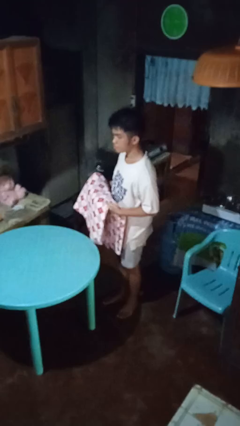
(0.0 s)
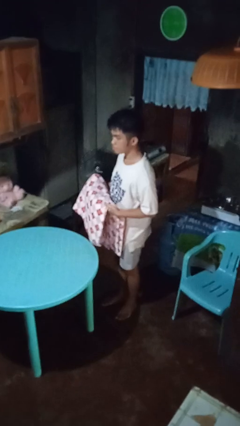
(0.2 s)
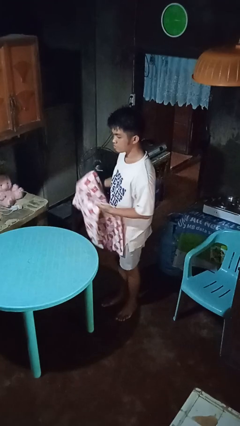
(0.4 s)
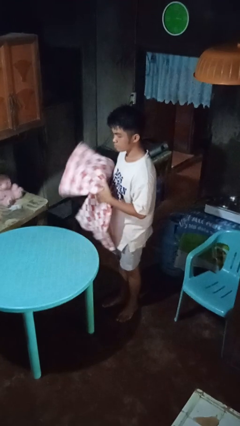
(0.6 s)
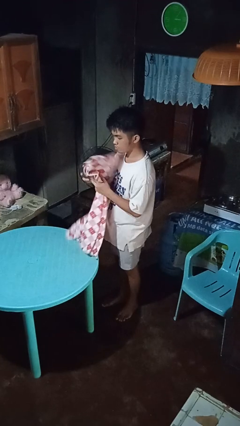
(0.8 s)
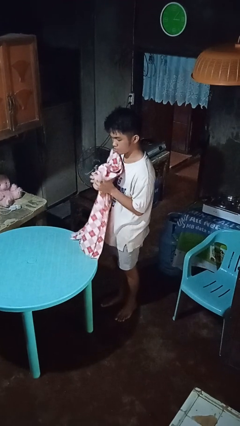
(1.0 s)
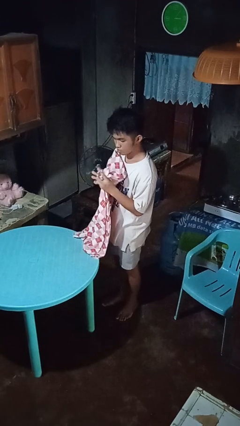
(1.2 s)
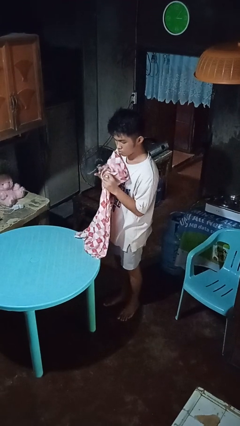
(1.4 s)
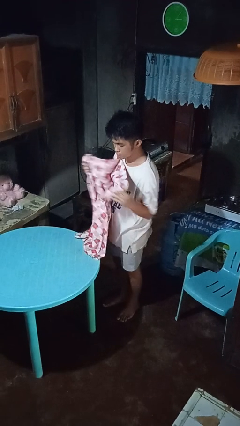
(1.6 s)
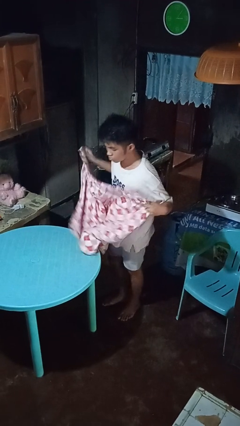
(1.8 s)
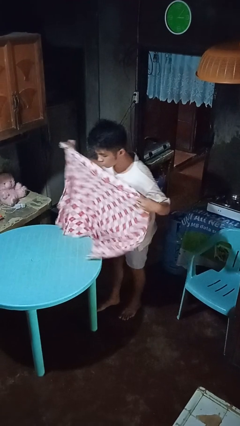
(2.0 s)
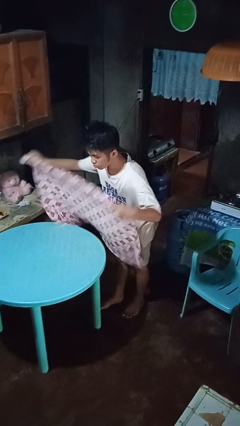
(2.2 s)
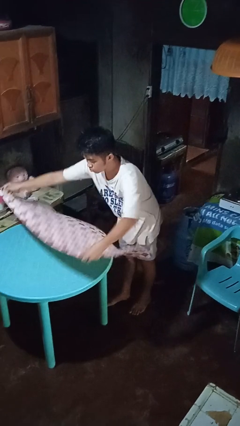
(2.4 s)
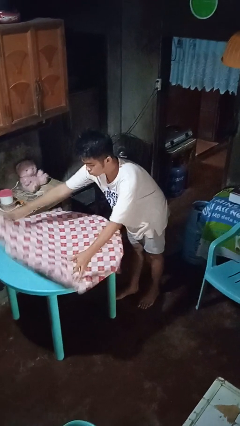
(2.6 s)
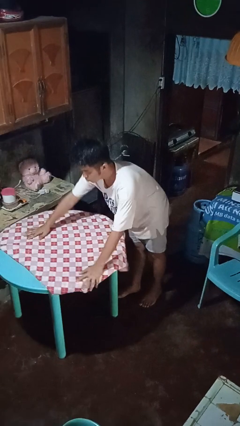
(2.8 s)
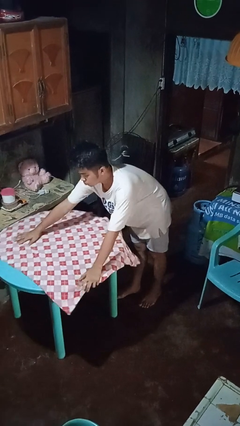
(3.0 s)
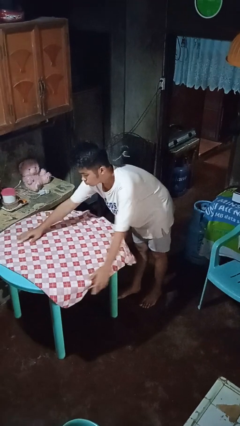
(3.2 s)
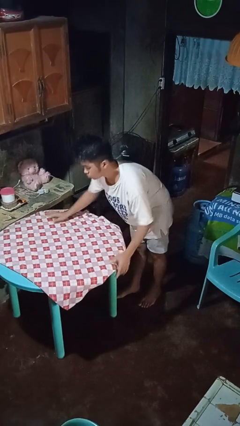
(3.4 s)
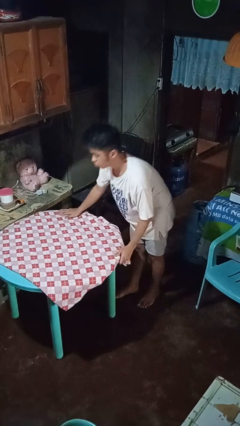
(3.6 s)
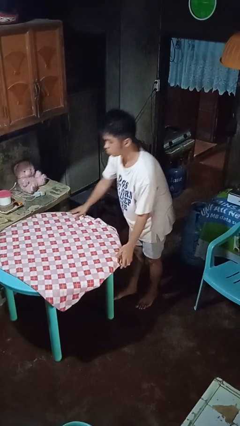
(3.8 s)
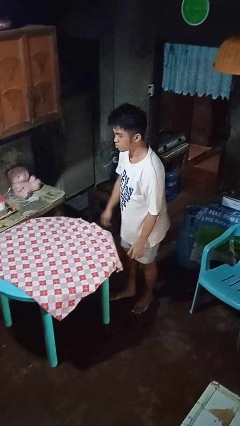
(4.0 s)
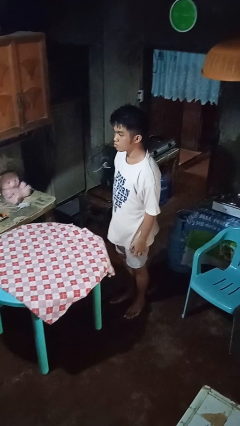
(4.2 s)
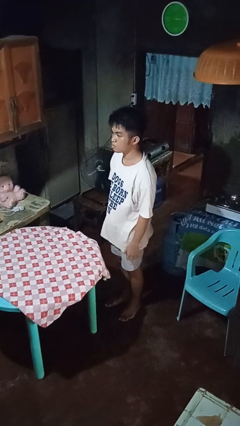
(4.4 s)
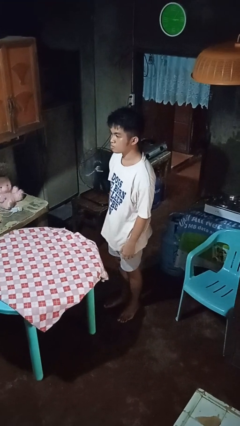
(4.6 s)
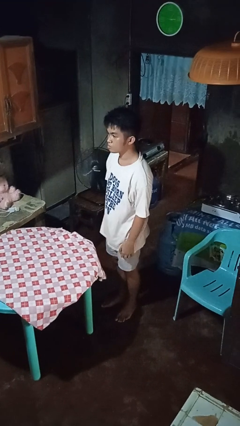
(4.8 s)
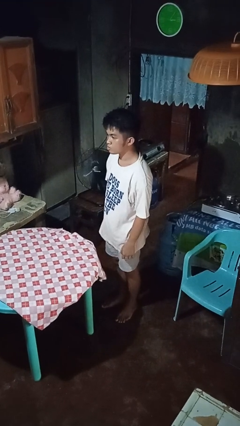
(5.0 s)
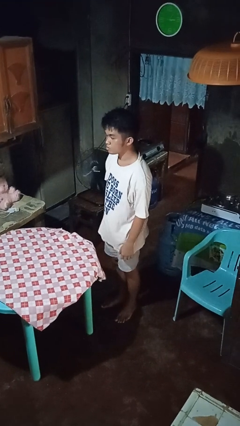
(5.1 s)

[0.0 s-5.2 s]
person spreads tablecloth

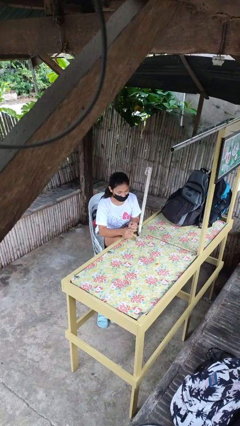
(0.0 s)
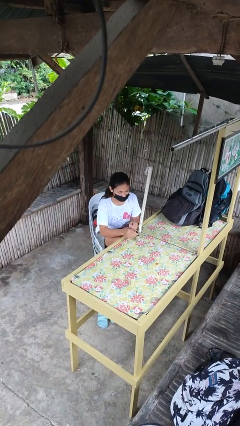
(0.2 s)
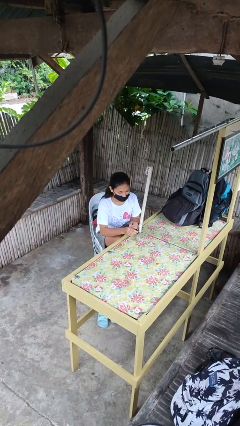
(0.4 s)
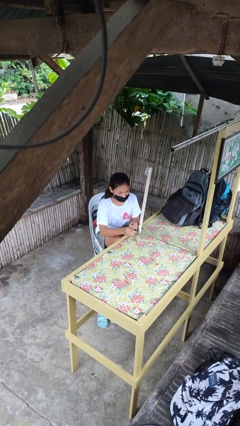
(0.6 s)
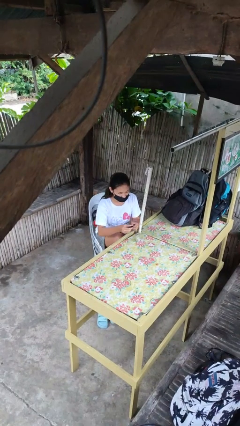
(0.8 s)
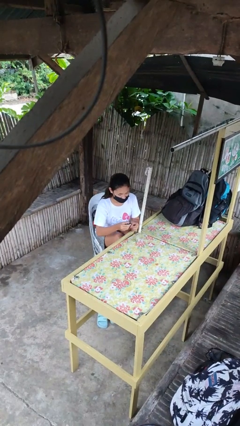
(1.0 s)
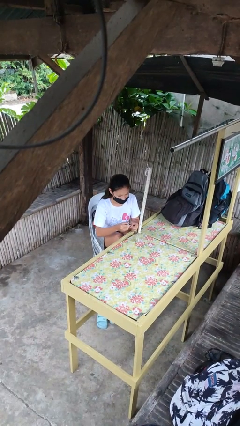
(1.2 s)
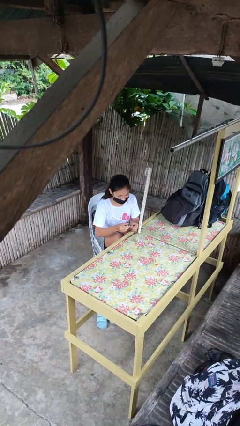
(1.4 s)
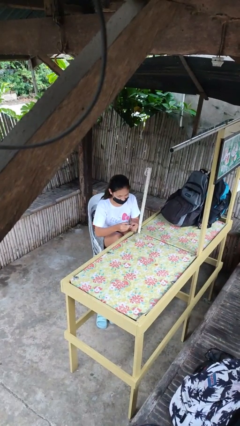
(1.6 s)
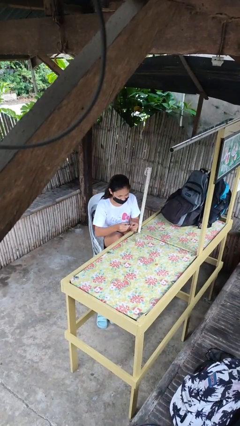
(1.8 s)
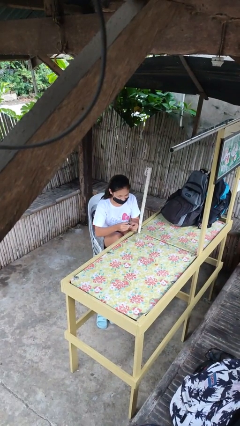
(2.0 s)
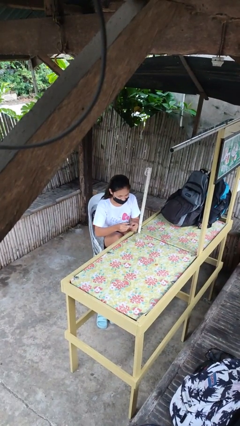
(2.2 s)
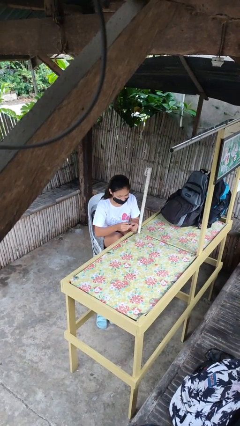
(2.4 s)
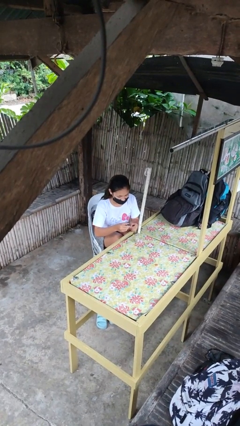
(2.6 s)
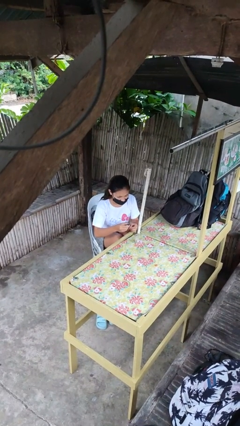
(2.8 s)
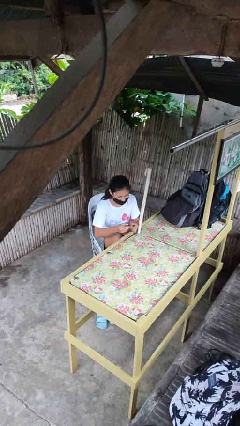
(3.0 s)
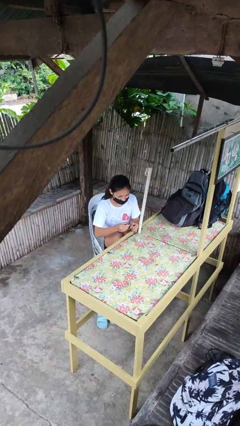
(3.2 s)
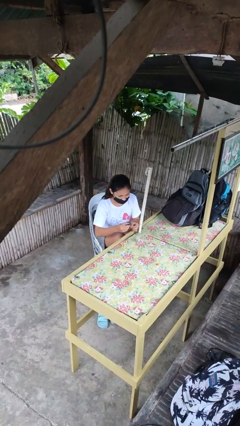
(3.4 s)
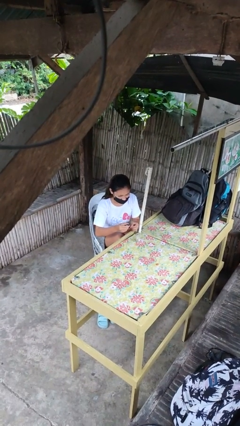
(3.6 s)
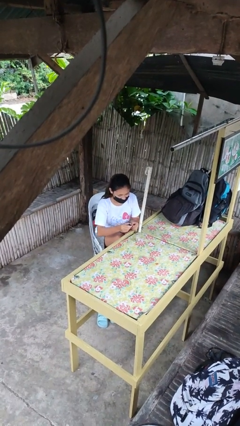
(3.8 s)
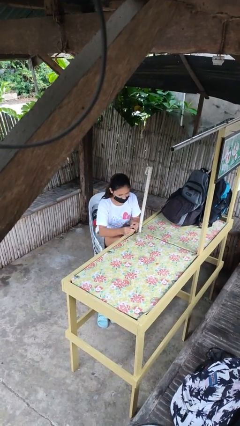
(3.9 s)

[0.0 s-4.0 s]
person paints fingernails

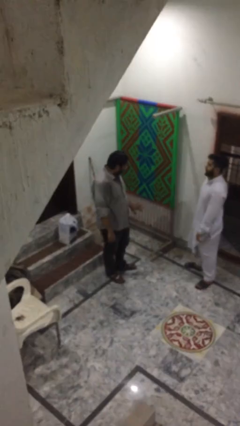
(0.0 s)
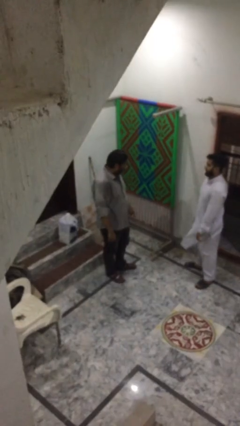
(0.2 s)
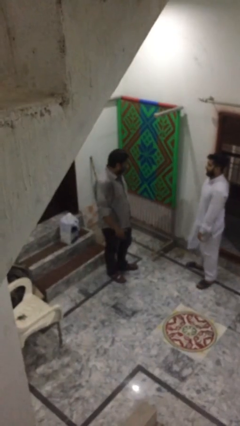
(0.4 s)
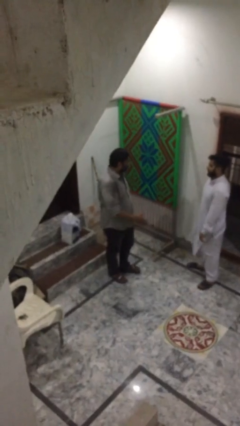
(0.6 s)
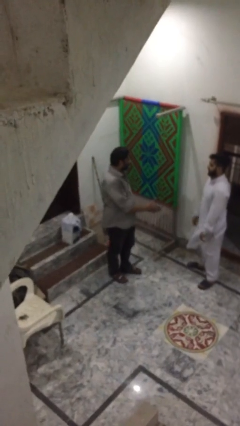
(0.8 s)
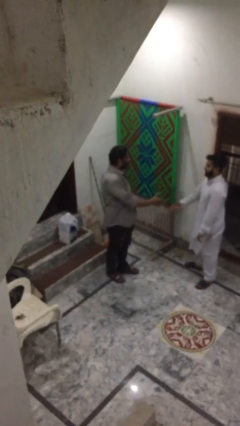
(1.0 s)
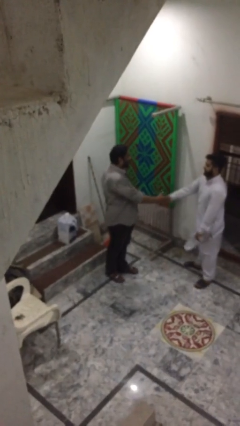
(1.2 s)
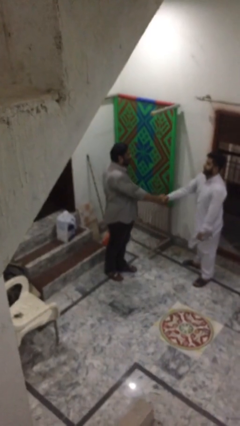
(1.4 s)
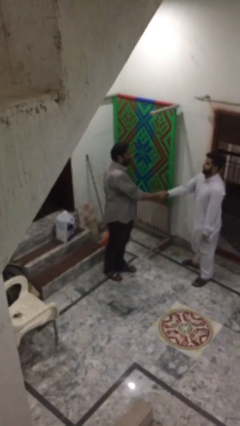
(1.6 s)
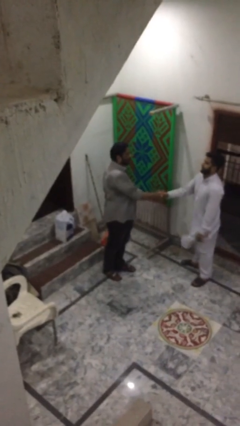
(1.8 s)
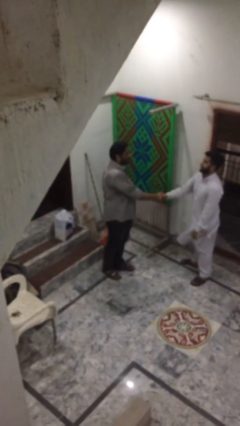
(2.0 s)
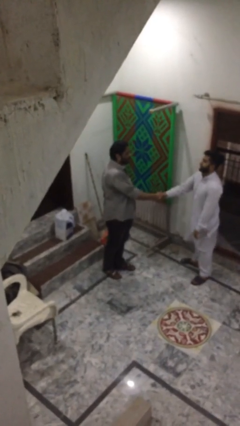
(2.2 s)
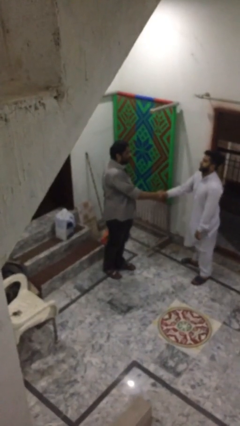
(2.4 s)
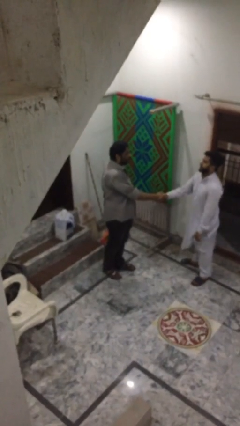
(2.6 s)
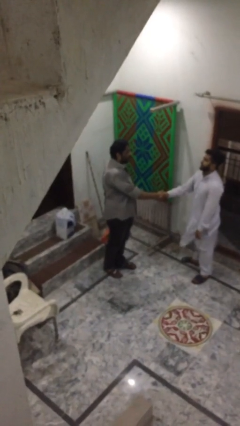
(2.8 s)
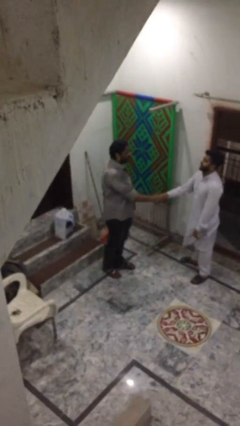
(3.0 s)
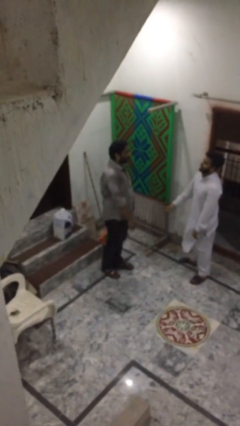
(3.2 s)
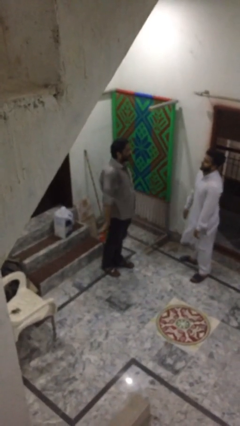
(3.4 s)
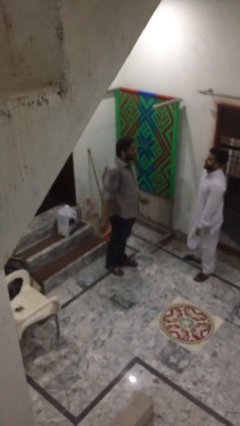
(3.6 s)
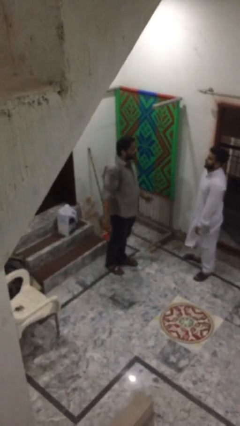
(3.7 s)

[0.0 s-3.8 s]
person shakes hand

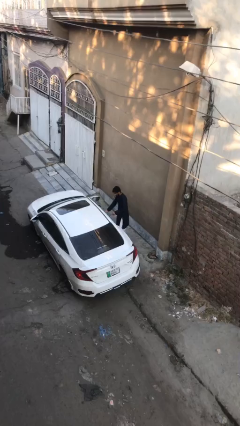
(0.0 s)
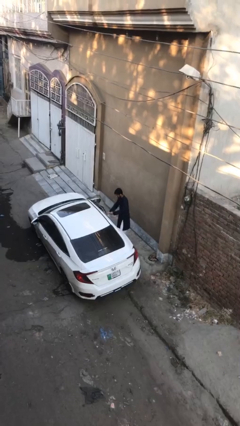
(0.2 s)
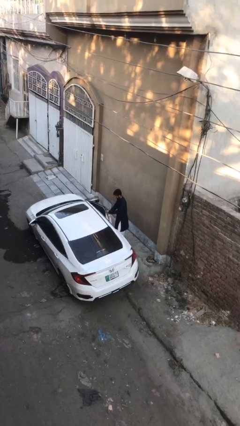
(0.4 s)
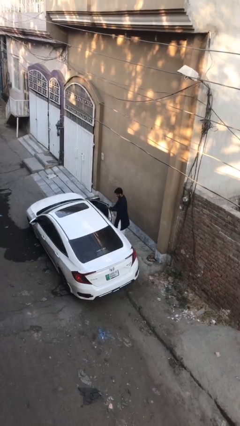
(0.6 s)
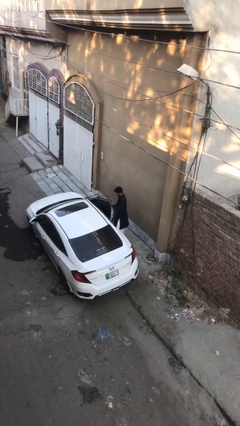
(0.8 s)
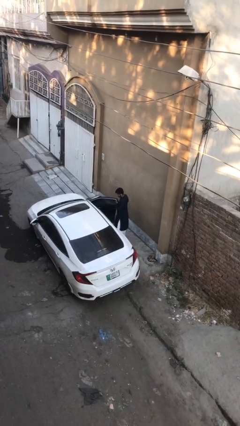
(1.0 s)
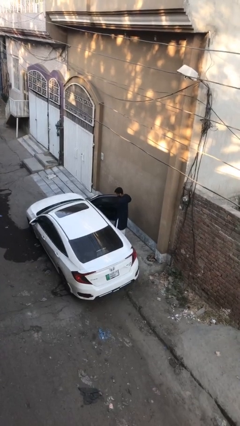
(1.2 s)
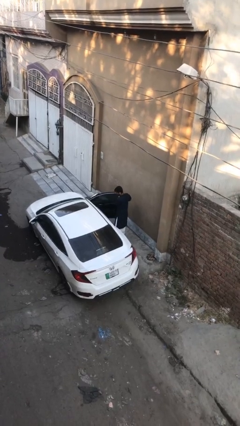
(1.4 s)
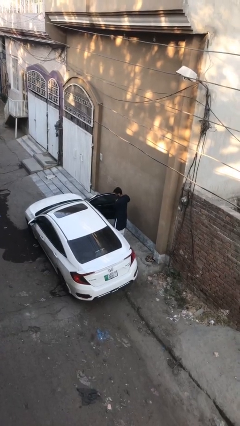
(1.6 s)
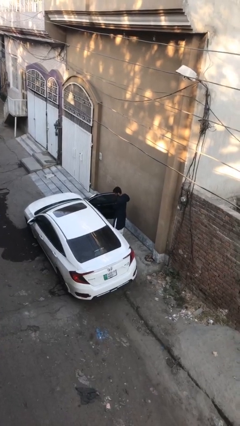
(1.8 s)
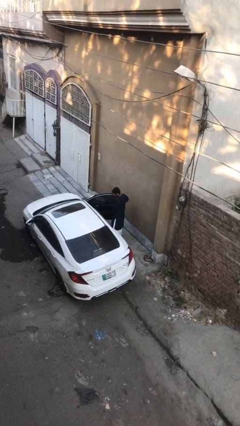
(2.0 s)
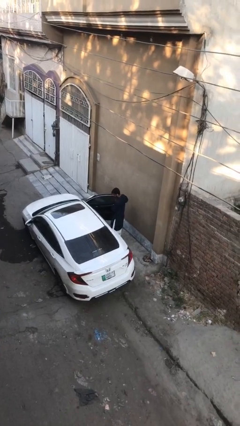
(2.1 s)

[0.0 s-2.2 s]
person opens car door

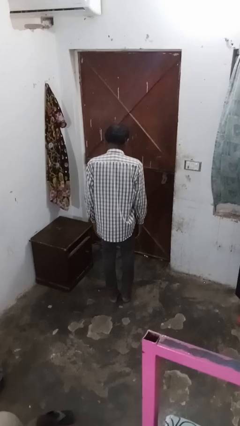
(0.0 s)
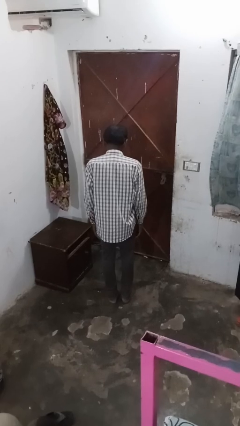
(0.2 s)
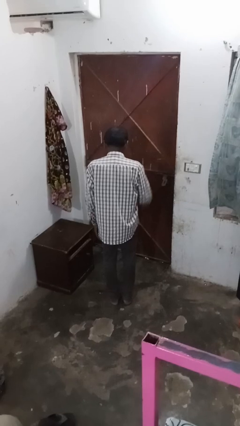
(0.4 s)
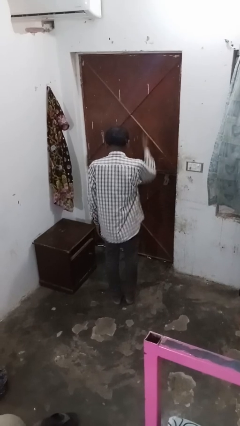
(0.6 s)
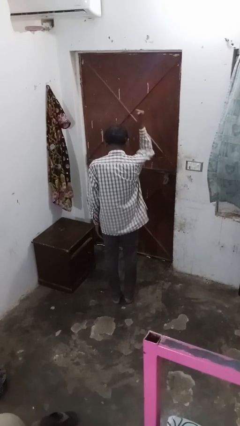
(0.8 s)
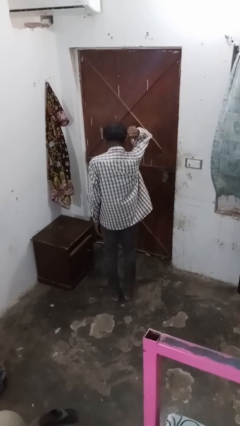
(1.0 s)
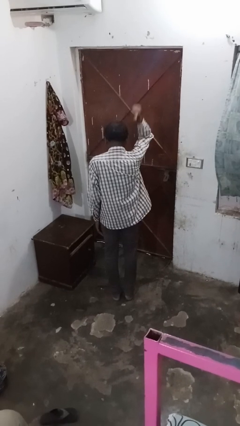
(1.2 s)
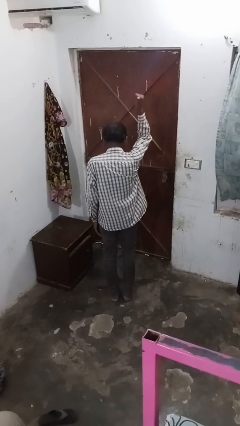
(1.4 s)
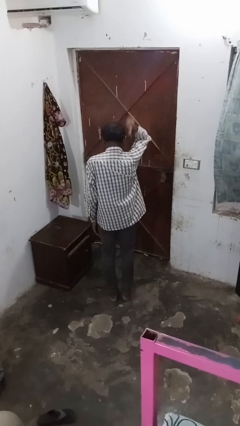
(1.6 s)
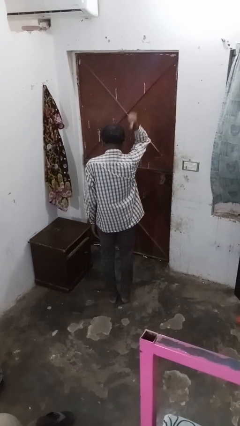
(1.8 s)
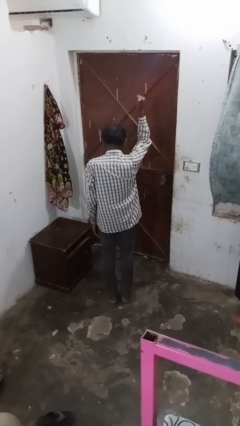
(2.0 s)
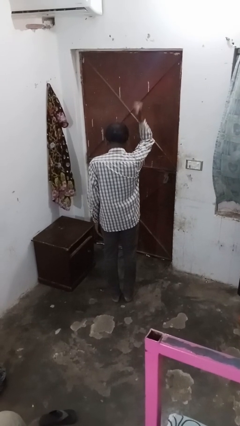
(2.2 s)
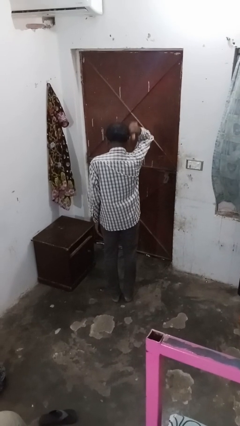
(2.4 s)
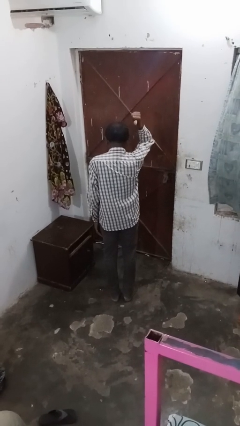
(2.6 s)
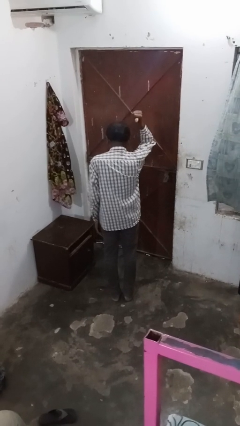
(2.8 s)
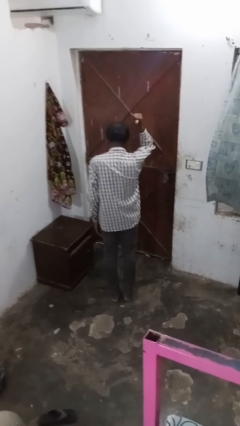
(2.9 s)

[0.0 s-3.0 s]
person gestures behind me
